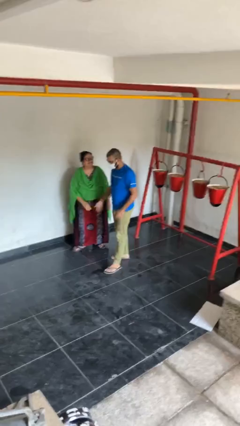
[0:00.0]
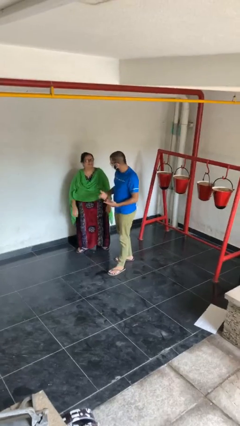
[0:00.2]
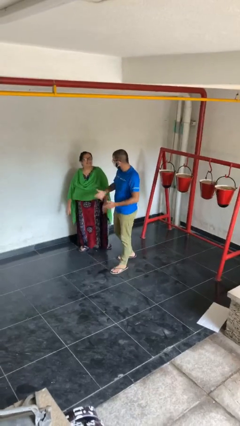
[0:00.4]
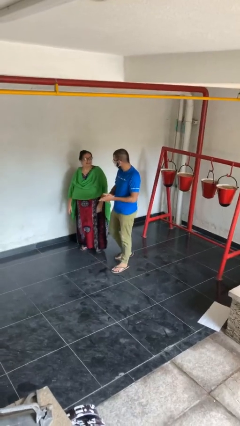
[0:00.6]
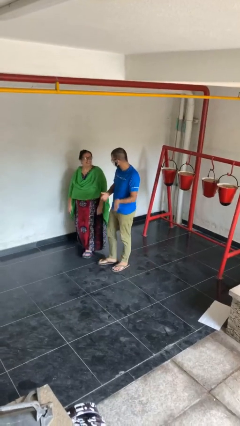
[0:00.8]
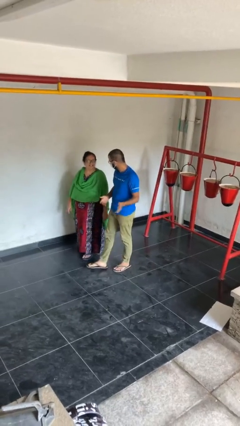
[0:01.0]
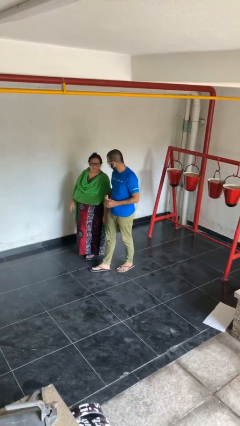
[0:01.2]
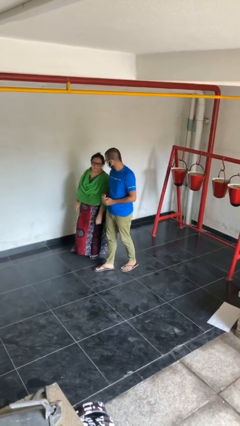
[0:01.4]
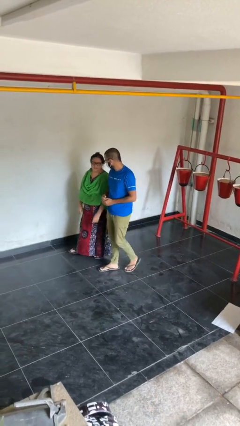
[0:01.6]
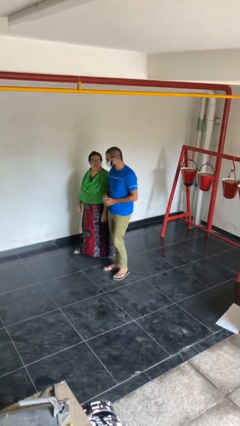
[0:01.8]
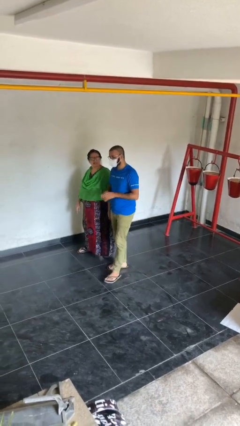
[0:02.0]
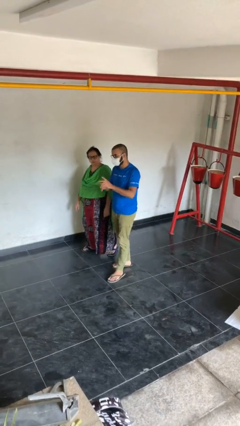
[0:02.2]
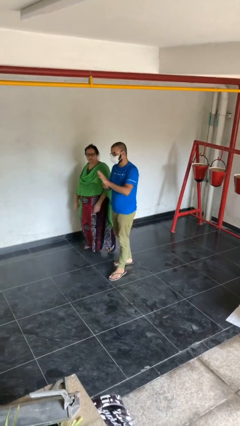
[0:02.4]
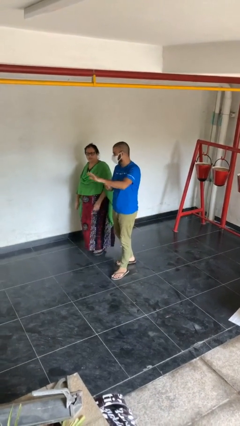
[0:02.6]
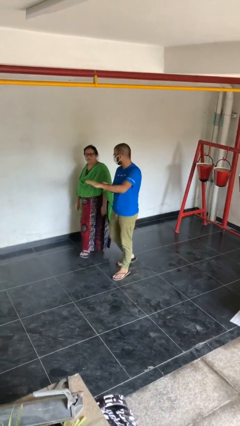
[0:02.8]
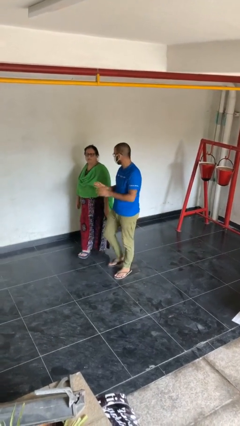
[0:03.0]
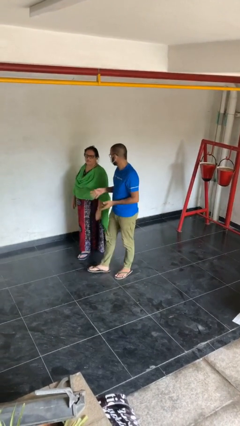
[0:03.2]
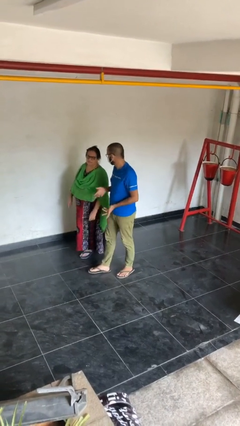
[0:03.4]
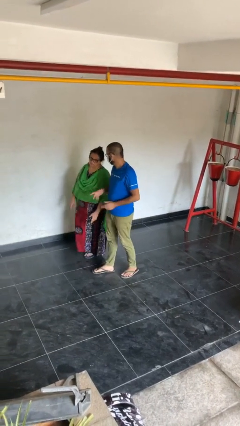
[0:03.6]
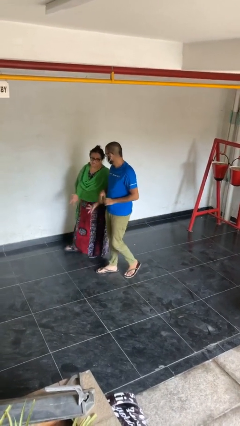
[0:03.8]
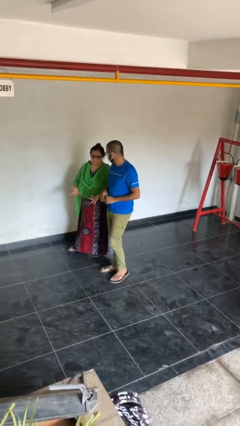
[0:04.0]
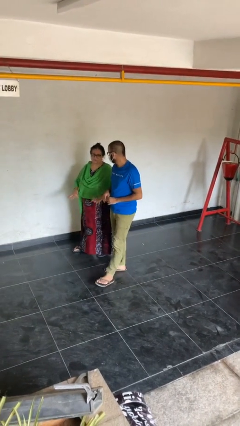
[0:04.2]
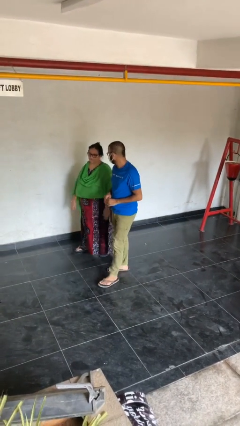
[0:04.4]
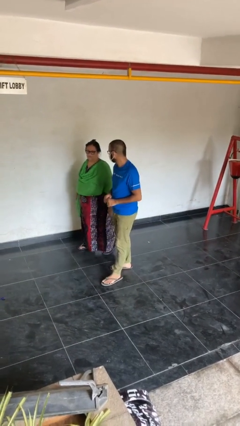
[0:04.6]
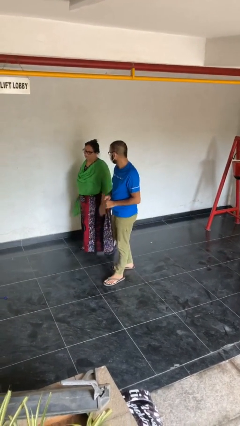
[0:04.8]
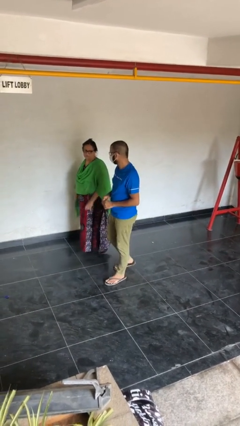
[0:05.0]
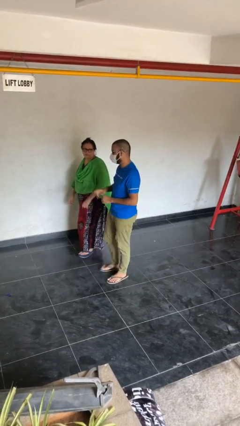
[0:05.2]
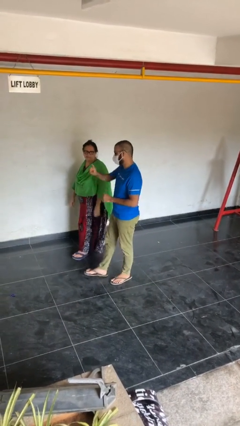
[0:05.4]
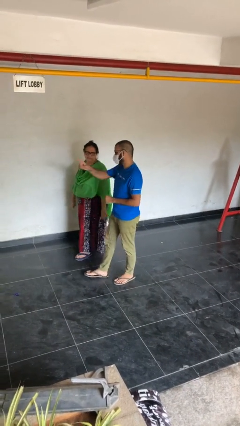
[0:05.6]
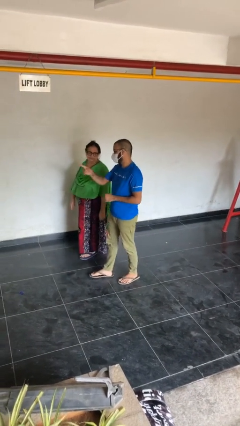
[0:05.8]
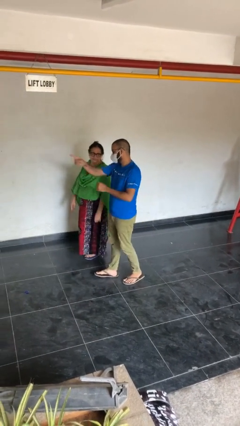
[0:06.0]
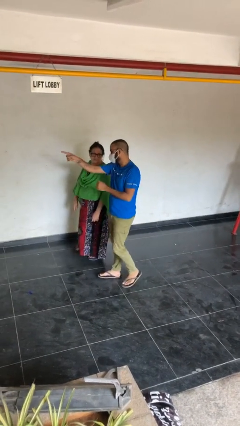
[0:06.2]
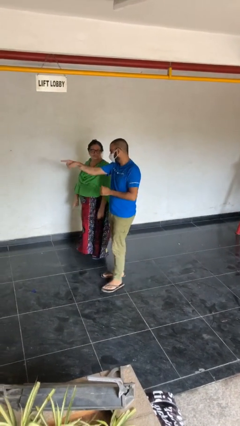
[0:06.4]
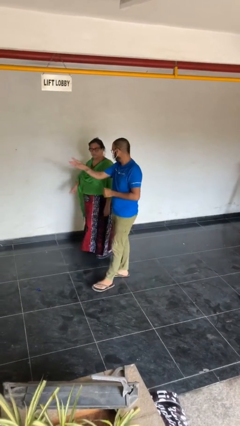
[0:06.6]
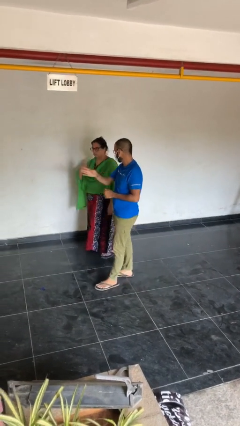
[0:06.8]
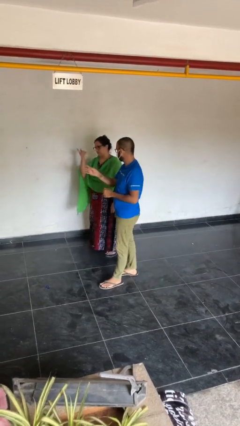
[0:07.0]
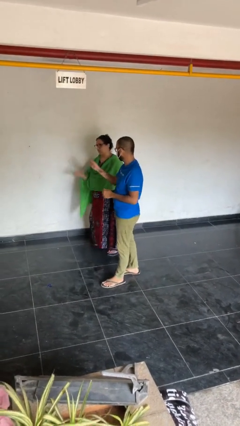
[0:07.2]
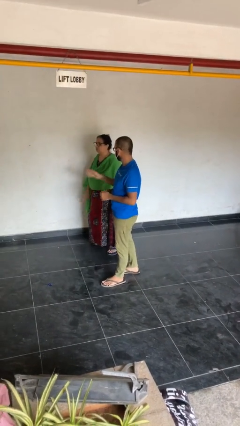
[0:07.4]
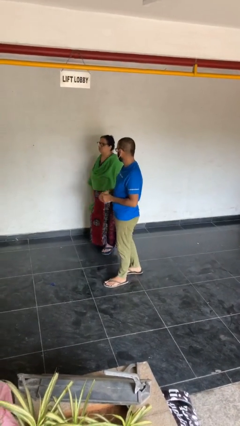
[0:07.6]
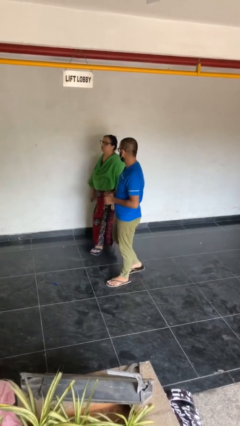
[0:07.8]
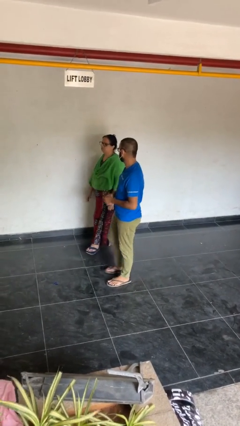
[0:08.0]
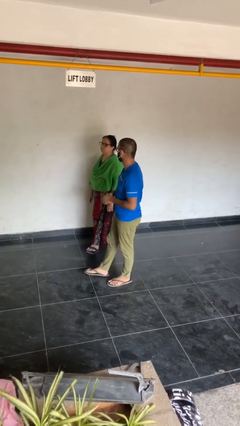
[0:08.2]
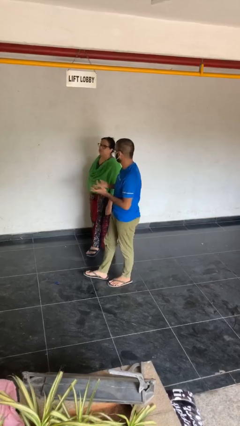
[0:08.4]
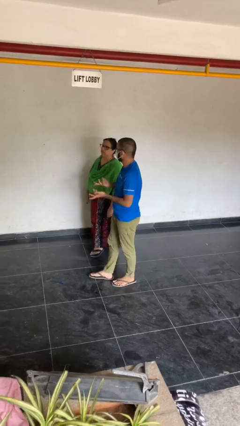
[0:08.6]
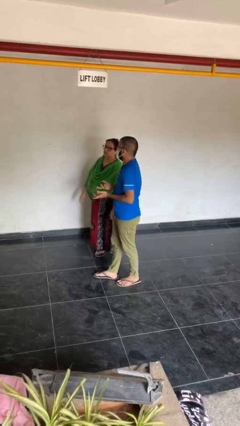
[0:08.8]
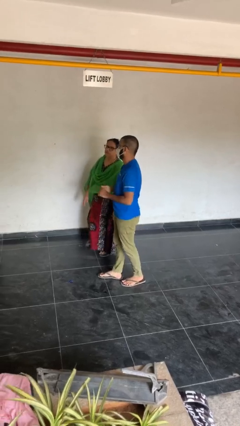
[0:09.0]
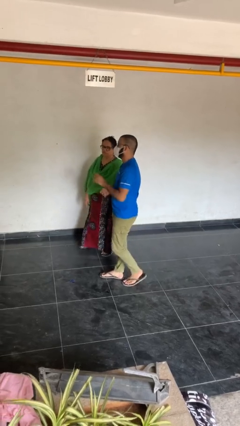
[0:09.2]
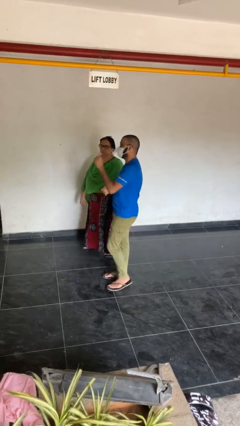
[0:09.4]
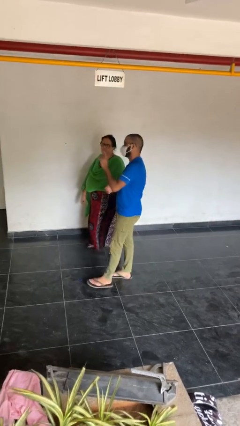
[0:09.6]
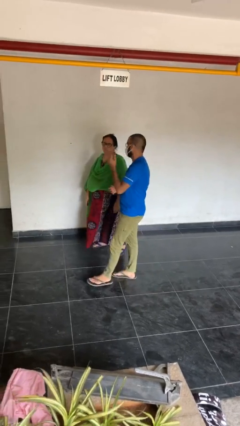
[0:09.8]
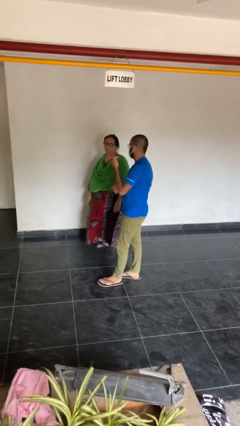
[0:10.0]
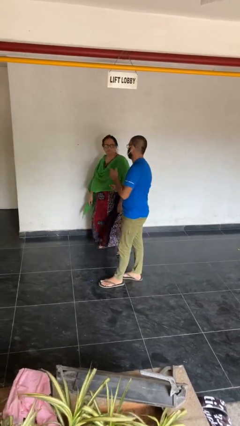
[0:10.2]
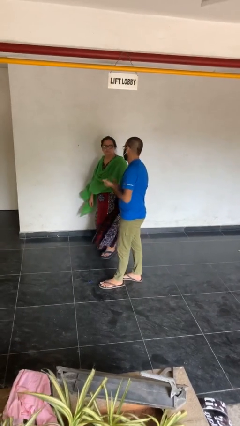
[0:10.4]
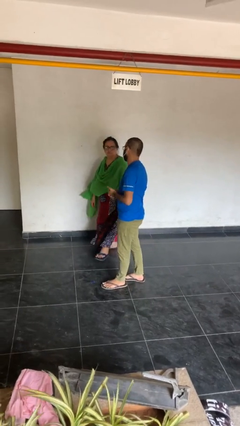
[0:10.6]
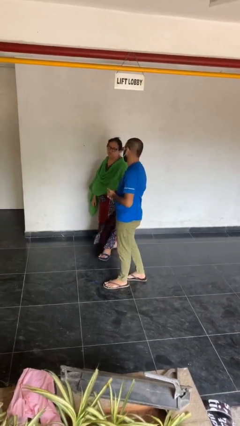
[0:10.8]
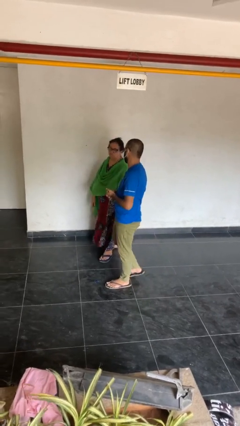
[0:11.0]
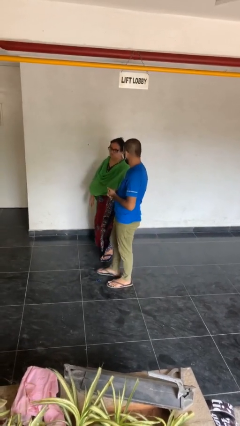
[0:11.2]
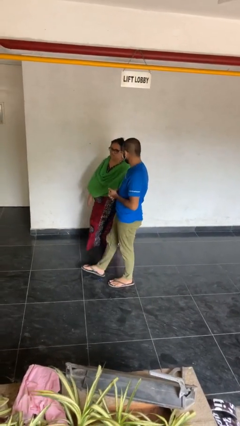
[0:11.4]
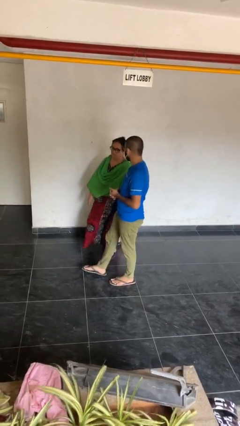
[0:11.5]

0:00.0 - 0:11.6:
person talks to person

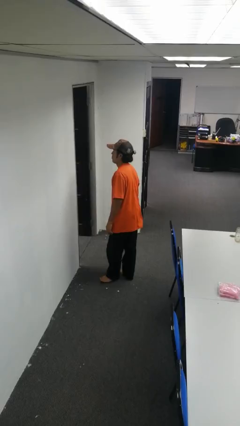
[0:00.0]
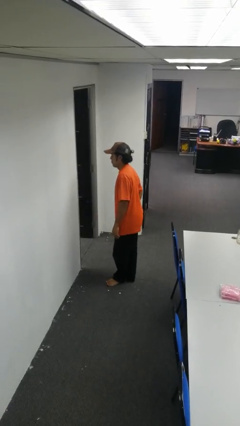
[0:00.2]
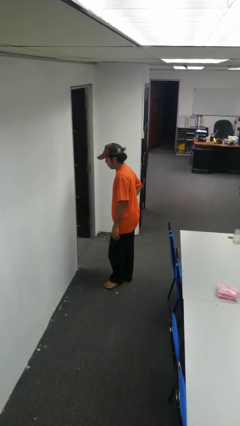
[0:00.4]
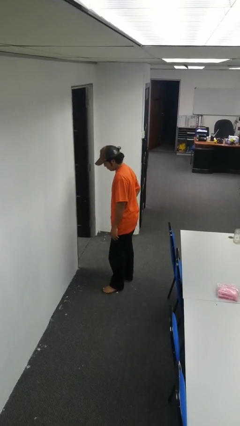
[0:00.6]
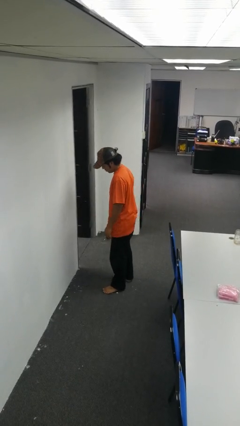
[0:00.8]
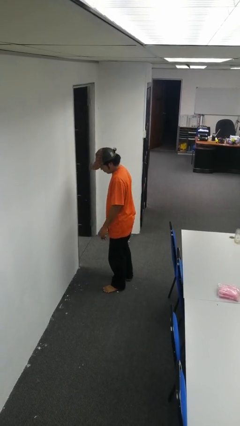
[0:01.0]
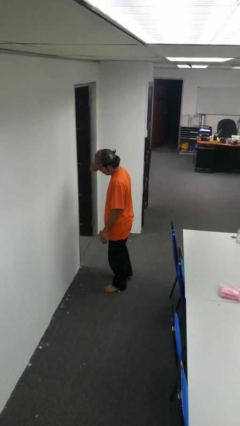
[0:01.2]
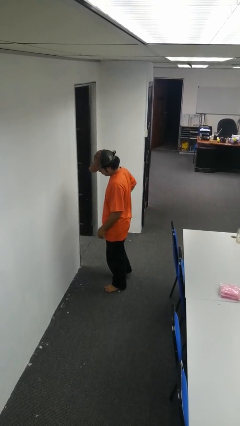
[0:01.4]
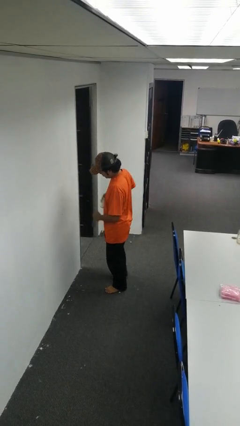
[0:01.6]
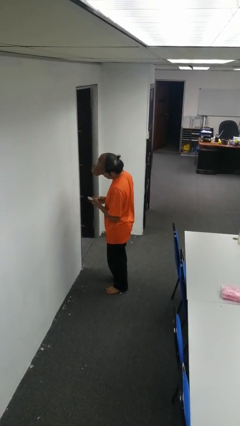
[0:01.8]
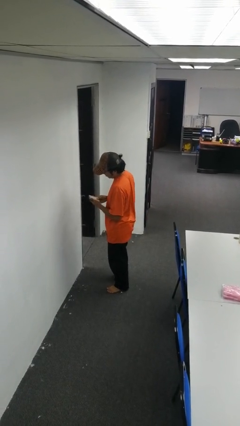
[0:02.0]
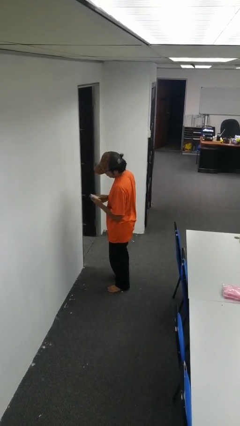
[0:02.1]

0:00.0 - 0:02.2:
person takes phone from pocket

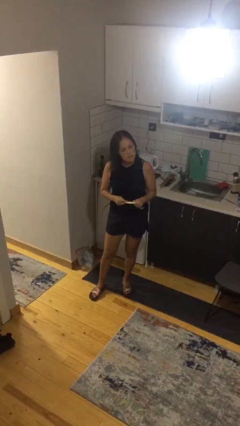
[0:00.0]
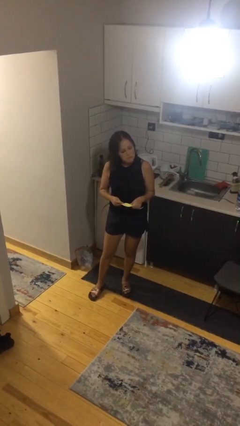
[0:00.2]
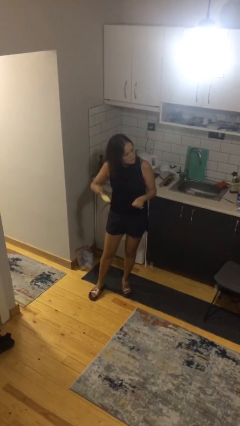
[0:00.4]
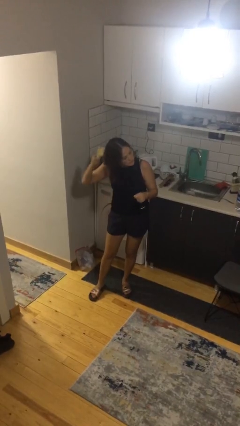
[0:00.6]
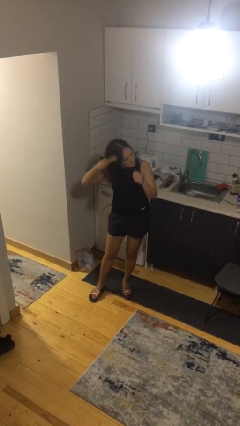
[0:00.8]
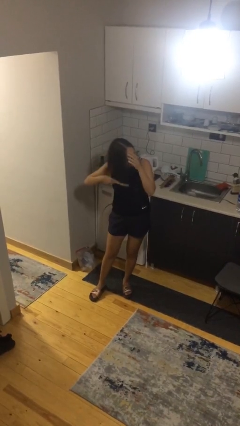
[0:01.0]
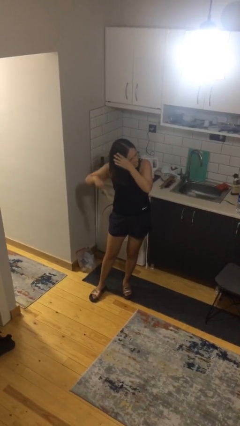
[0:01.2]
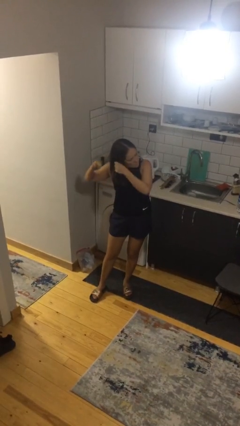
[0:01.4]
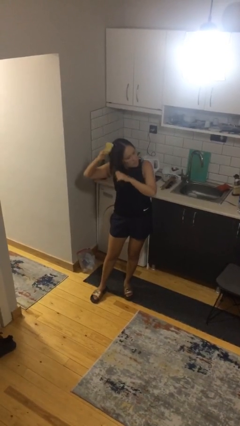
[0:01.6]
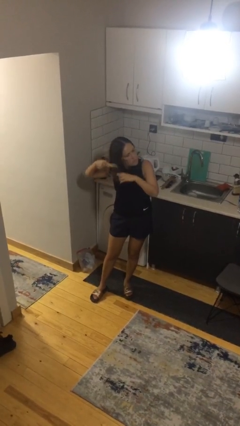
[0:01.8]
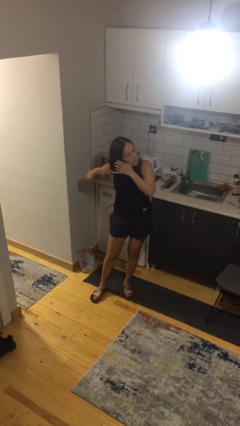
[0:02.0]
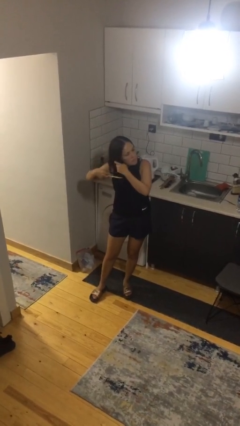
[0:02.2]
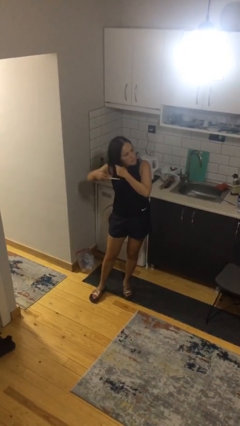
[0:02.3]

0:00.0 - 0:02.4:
person brushes hair

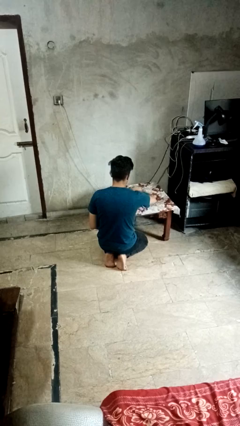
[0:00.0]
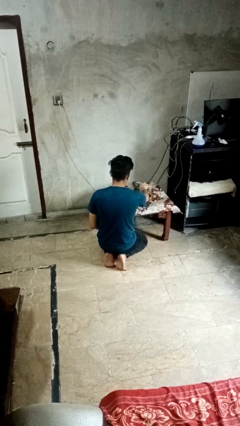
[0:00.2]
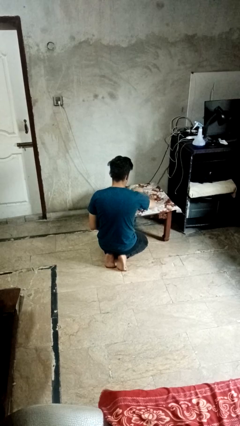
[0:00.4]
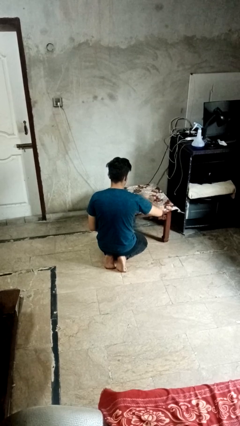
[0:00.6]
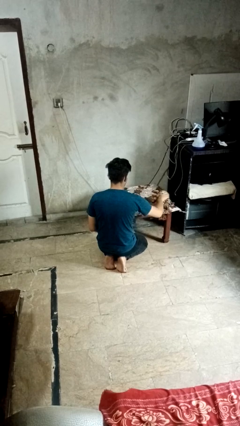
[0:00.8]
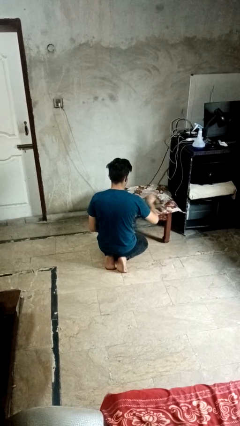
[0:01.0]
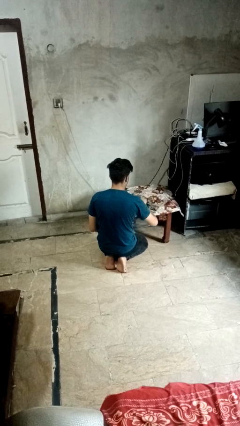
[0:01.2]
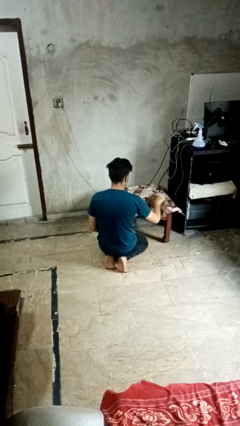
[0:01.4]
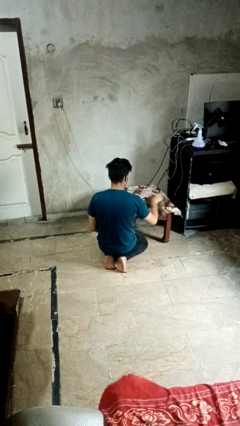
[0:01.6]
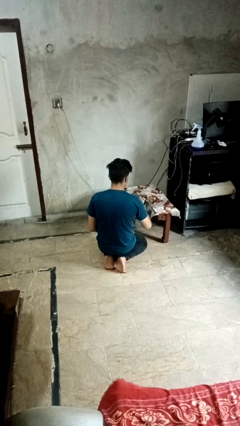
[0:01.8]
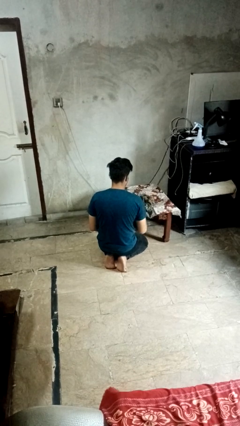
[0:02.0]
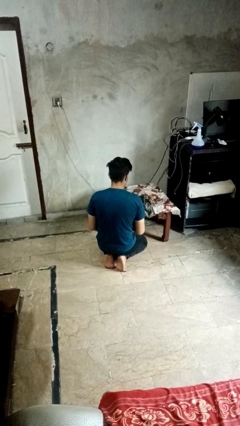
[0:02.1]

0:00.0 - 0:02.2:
person cleans table with rag
